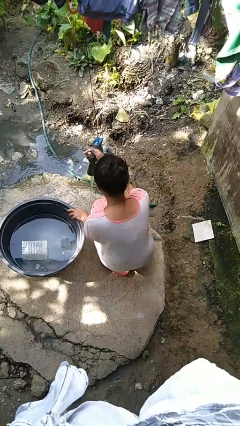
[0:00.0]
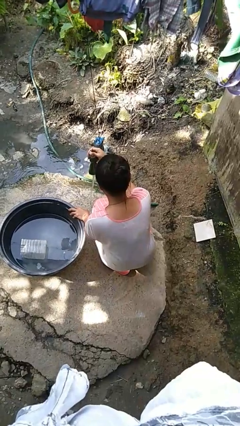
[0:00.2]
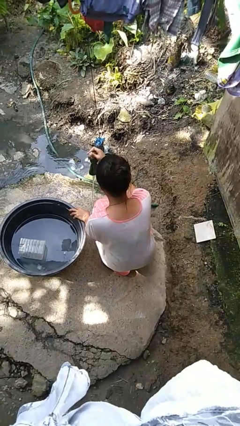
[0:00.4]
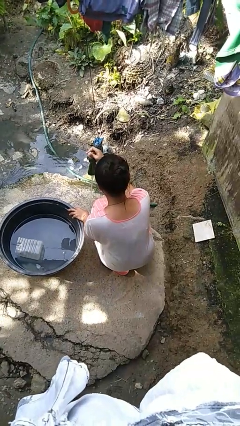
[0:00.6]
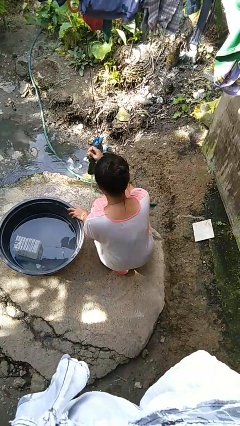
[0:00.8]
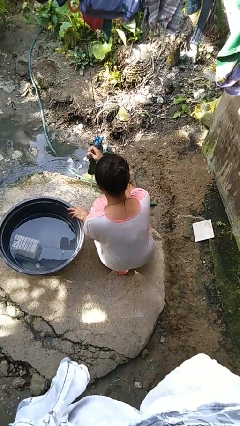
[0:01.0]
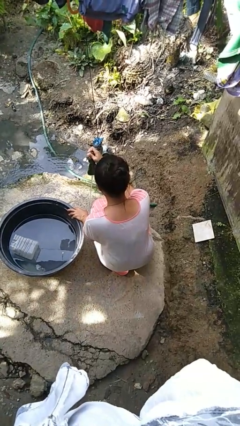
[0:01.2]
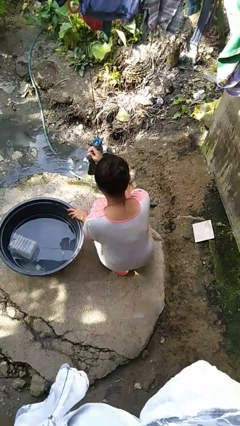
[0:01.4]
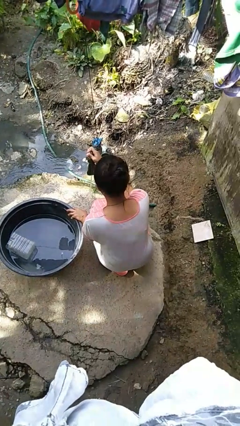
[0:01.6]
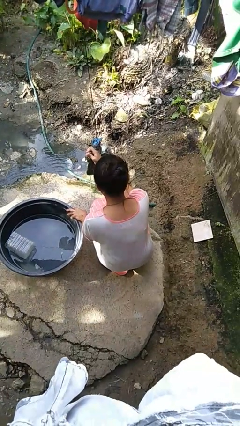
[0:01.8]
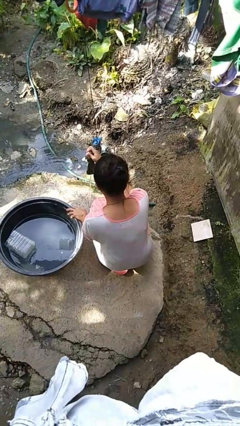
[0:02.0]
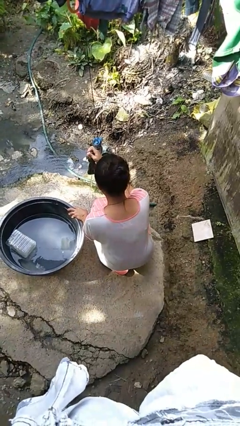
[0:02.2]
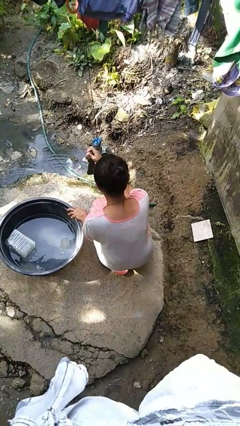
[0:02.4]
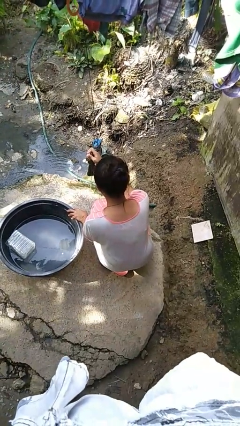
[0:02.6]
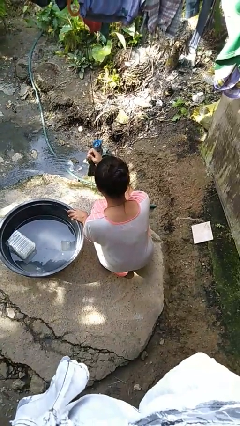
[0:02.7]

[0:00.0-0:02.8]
person turns off faucet

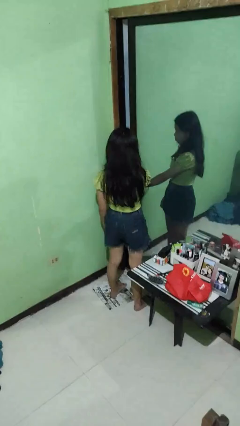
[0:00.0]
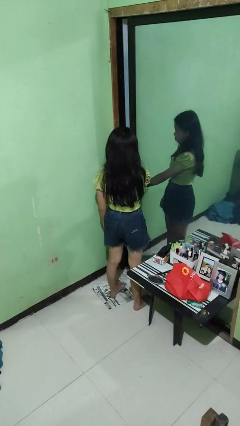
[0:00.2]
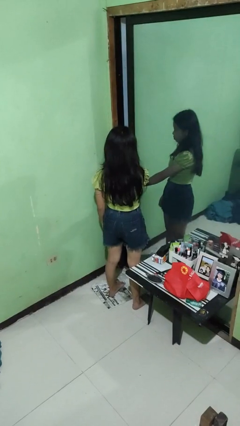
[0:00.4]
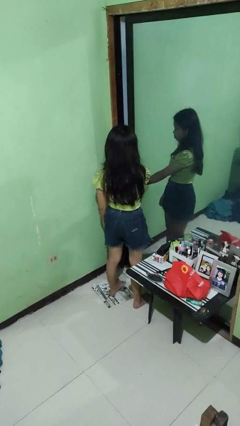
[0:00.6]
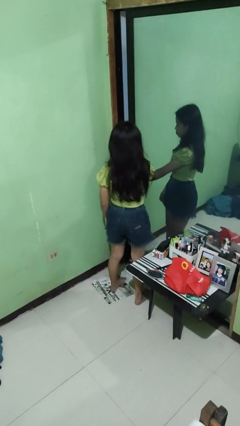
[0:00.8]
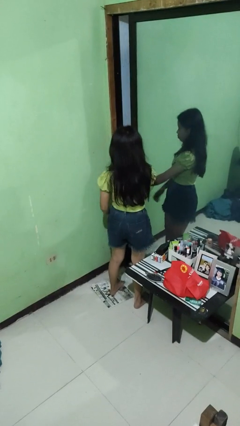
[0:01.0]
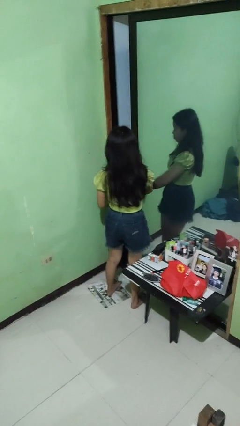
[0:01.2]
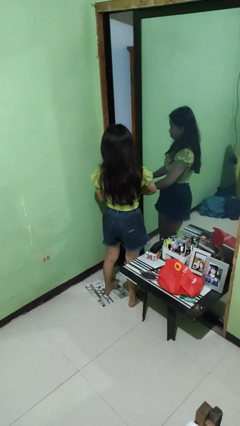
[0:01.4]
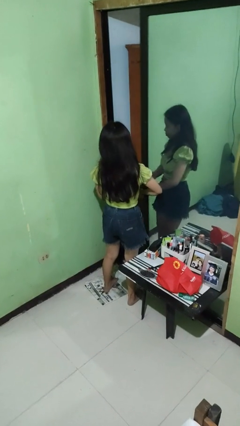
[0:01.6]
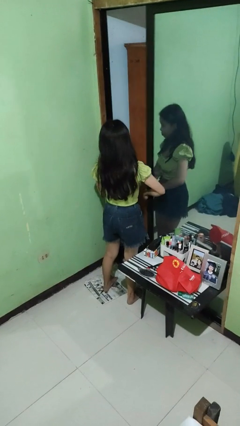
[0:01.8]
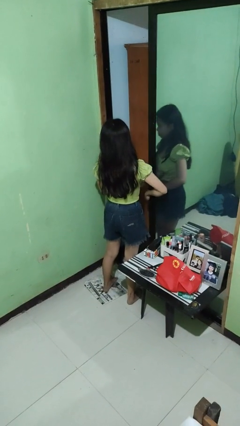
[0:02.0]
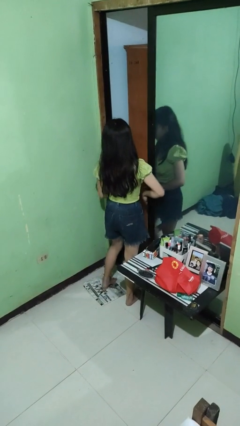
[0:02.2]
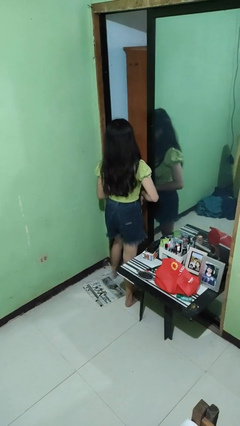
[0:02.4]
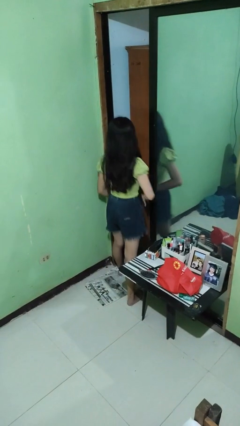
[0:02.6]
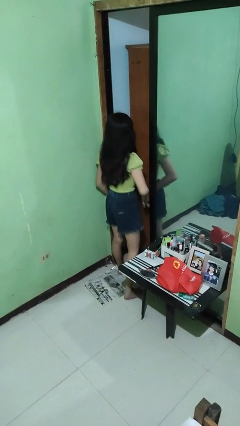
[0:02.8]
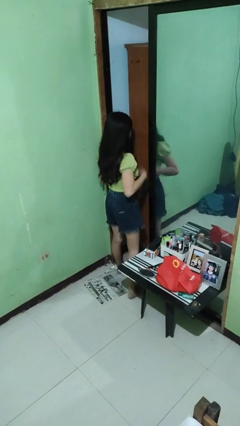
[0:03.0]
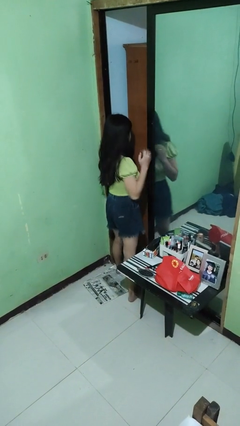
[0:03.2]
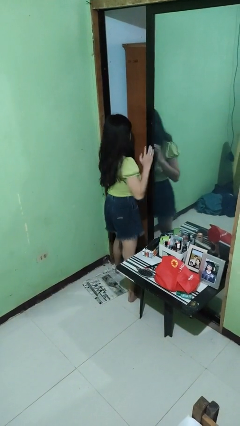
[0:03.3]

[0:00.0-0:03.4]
person opens sliding door

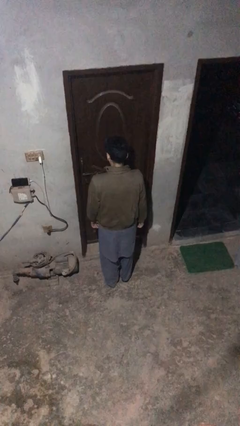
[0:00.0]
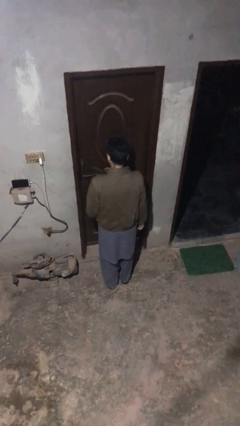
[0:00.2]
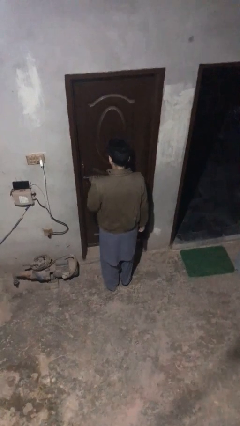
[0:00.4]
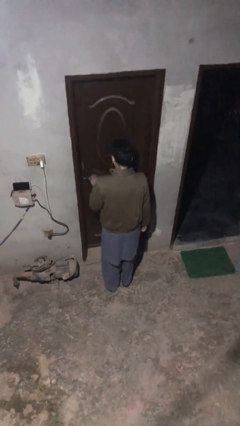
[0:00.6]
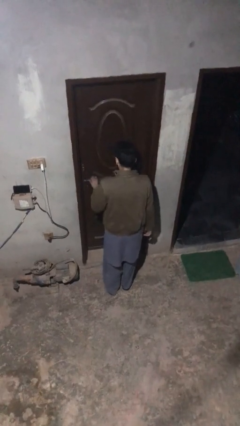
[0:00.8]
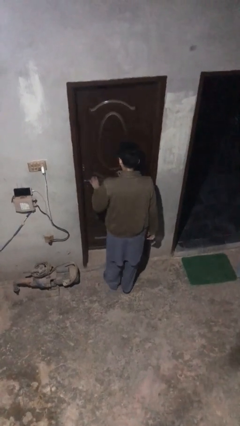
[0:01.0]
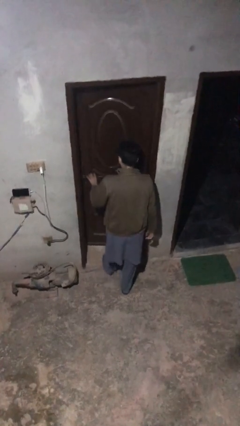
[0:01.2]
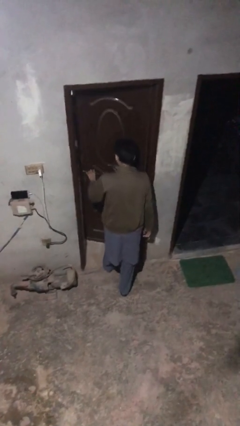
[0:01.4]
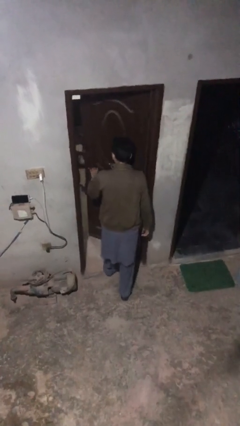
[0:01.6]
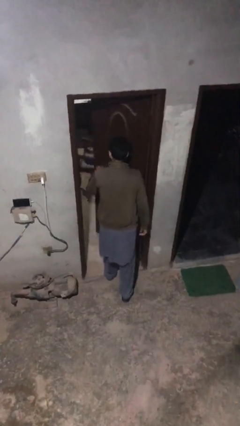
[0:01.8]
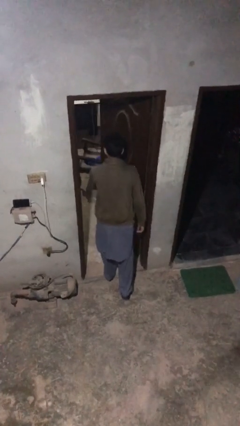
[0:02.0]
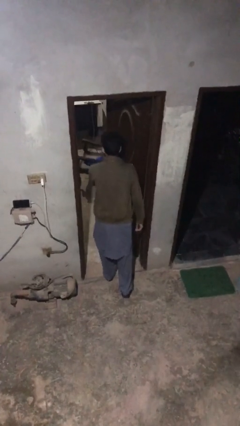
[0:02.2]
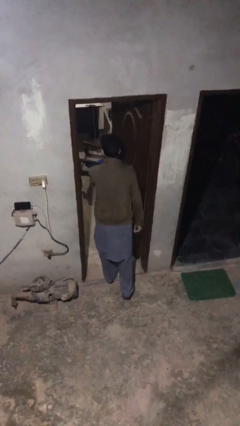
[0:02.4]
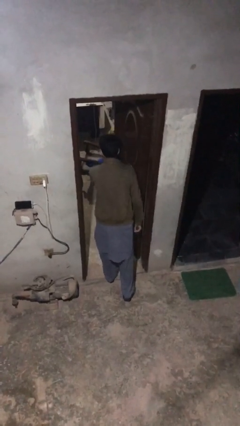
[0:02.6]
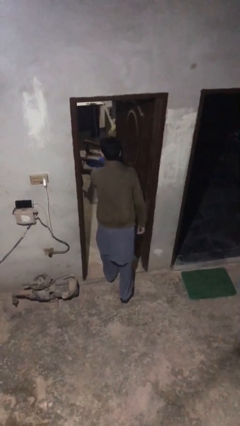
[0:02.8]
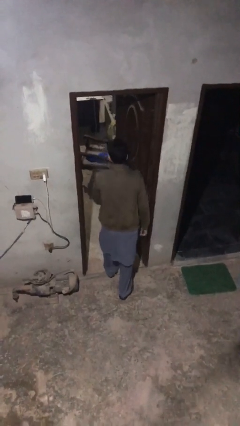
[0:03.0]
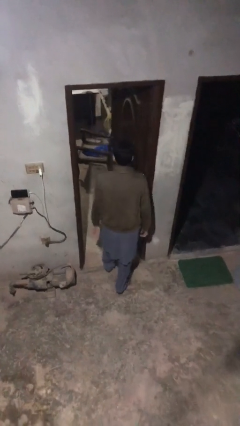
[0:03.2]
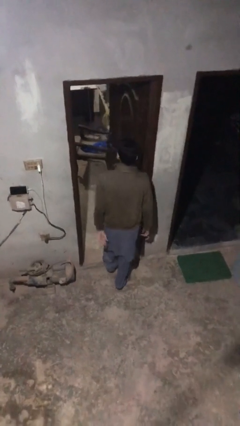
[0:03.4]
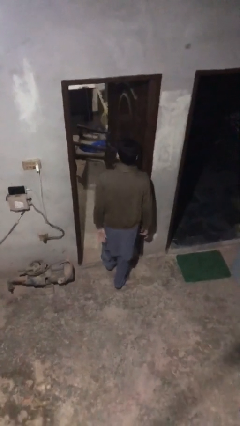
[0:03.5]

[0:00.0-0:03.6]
person opens facility door

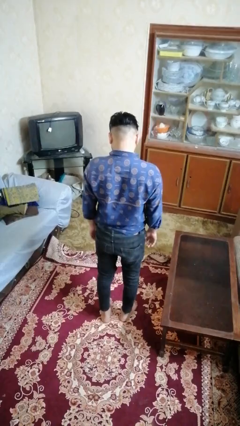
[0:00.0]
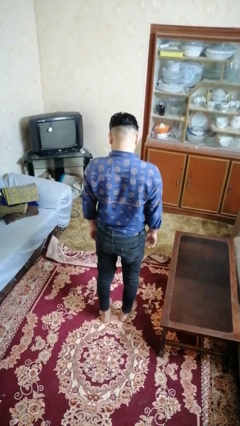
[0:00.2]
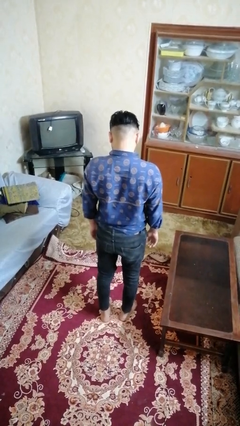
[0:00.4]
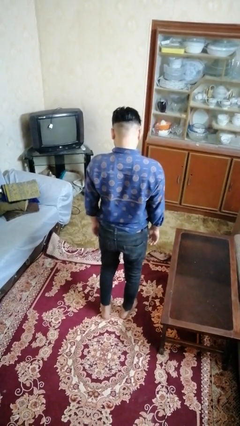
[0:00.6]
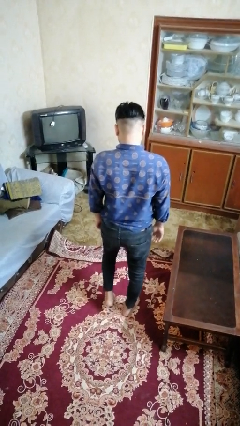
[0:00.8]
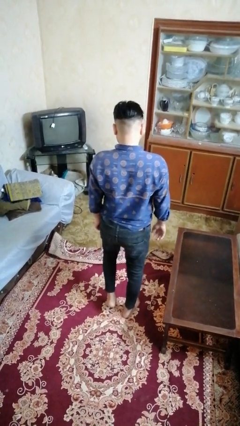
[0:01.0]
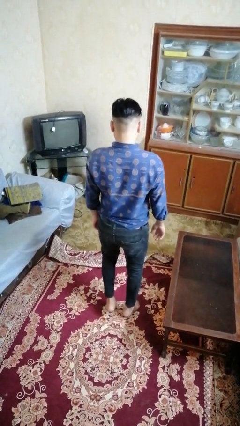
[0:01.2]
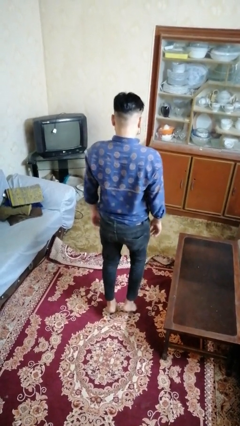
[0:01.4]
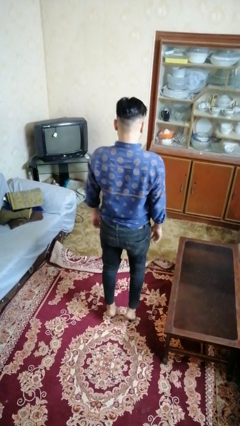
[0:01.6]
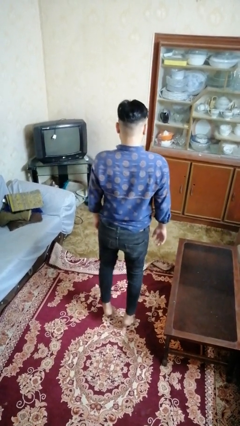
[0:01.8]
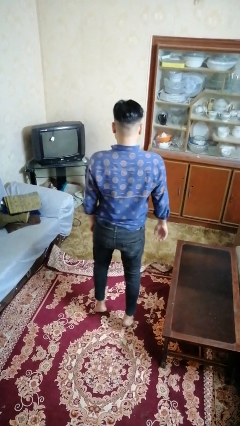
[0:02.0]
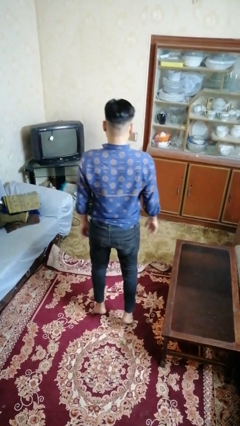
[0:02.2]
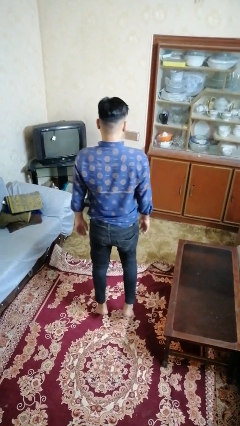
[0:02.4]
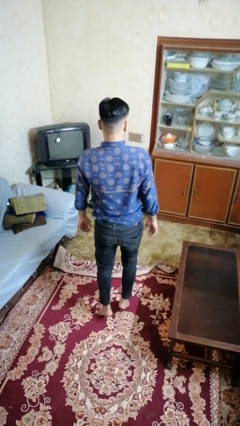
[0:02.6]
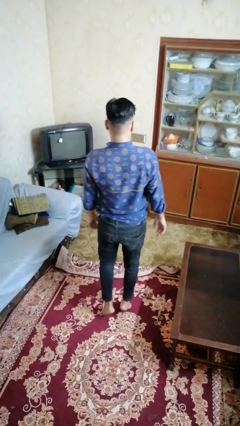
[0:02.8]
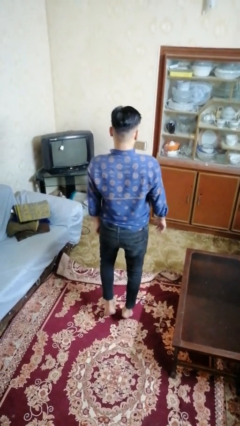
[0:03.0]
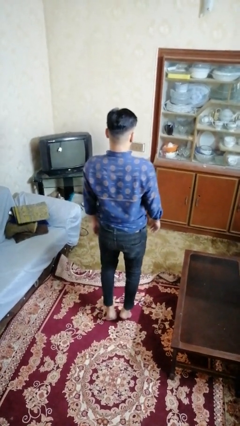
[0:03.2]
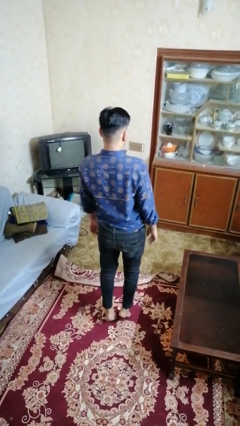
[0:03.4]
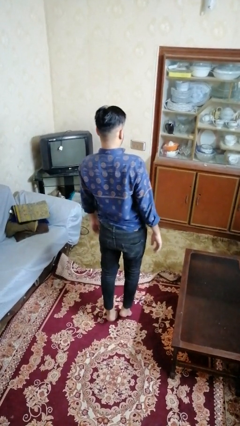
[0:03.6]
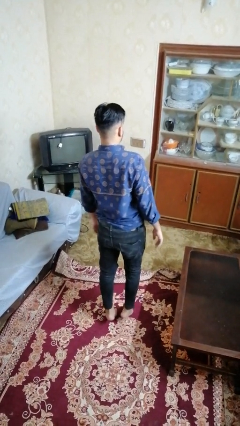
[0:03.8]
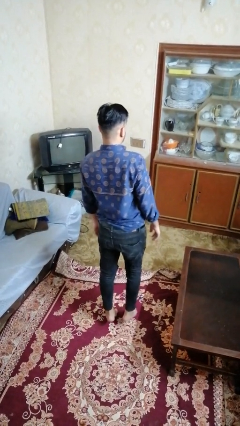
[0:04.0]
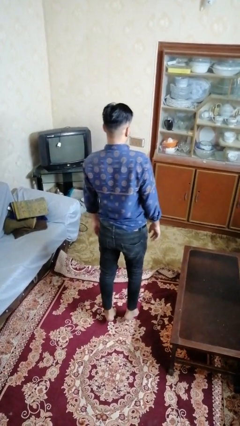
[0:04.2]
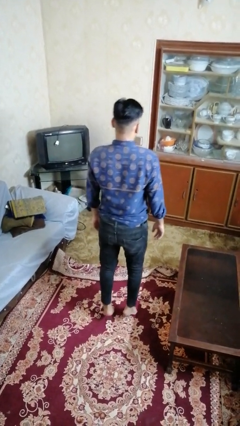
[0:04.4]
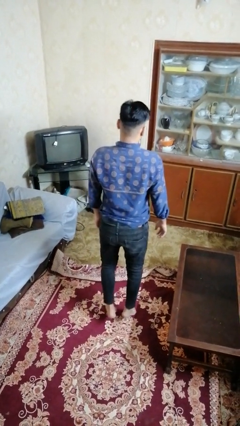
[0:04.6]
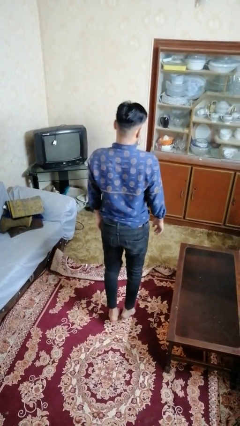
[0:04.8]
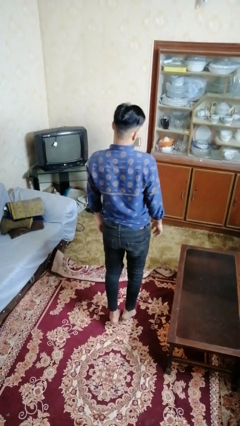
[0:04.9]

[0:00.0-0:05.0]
person walks tiptoe

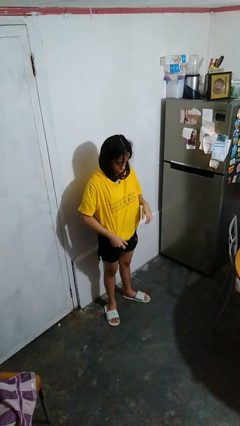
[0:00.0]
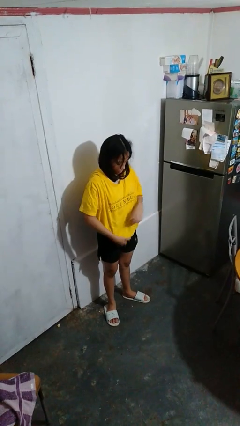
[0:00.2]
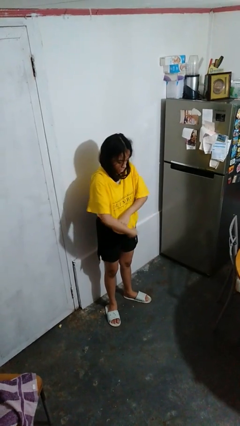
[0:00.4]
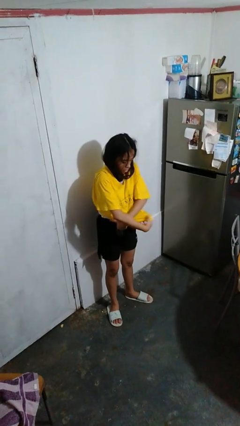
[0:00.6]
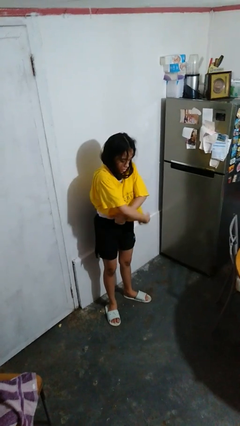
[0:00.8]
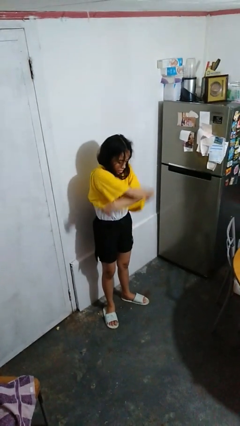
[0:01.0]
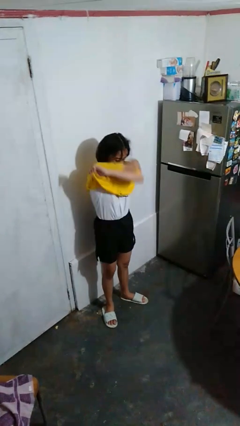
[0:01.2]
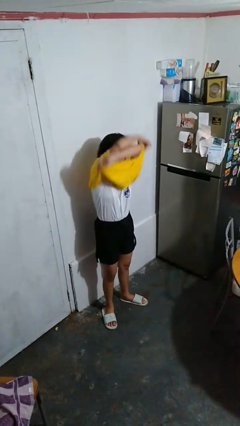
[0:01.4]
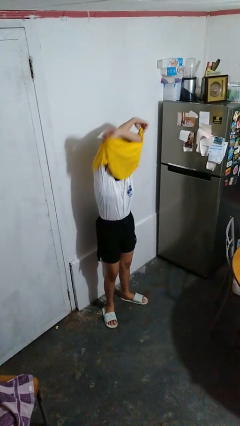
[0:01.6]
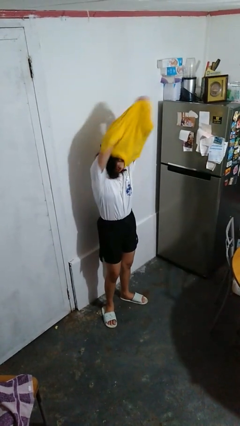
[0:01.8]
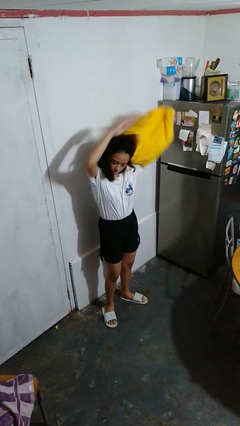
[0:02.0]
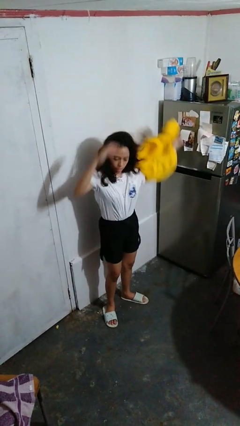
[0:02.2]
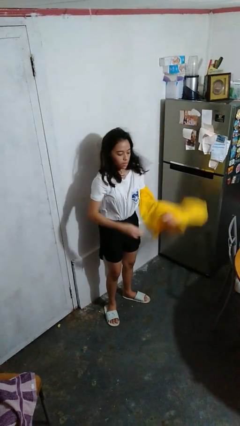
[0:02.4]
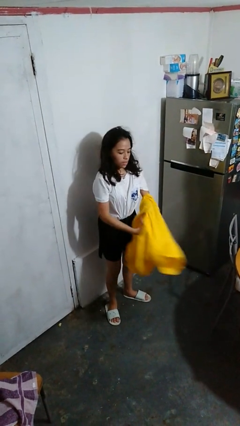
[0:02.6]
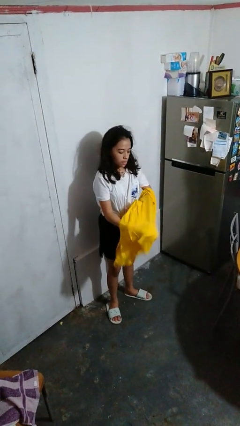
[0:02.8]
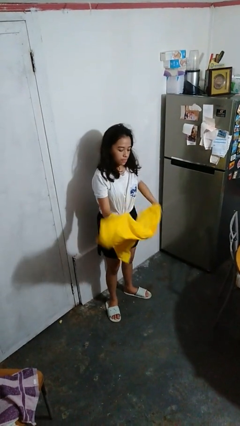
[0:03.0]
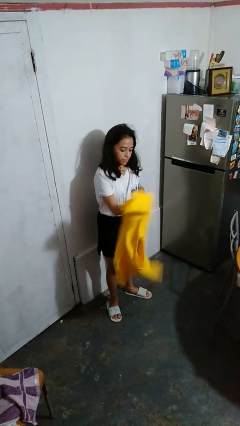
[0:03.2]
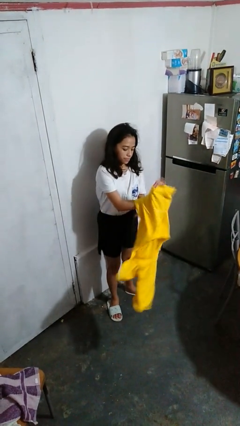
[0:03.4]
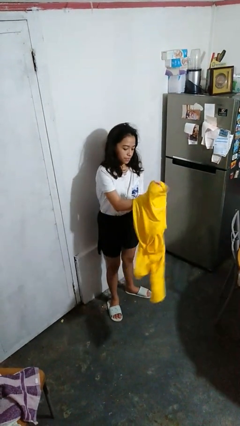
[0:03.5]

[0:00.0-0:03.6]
person takes off shirt
